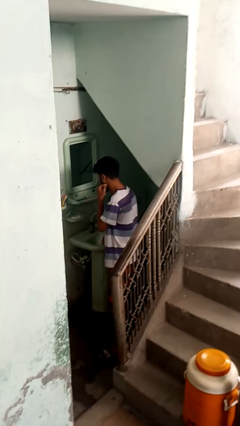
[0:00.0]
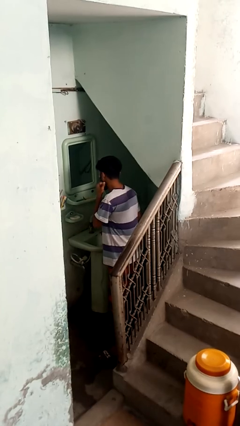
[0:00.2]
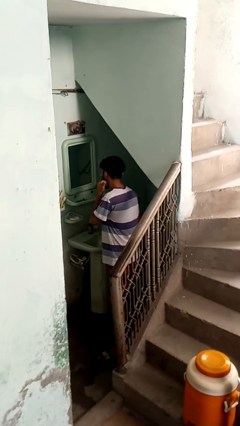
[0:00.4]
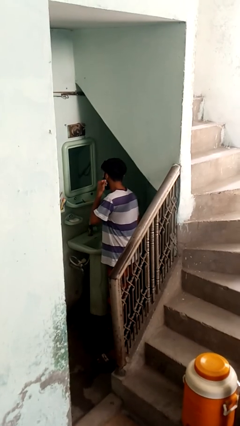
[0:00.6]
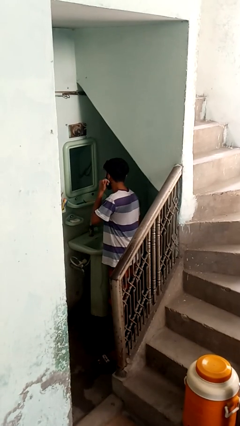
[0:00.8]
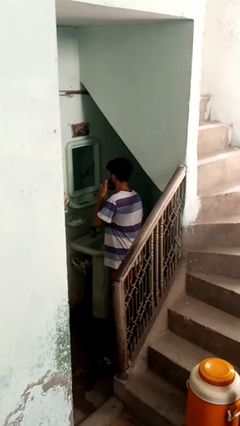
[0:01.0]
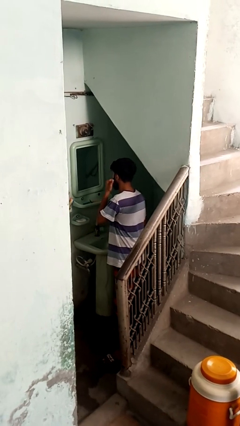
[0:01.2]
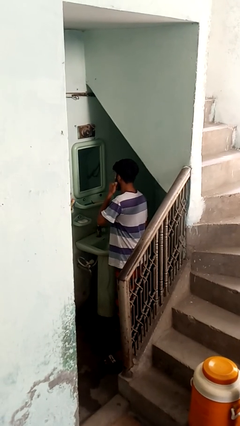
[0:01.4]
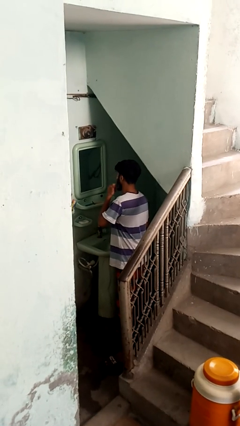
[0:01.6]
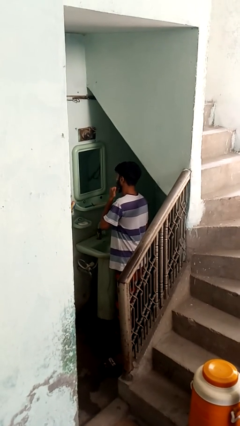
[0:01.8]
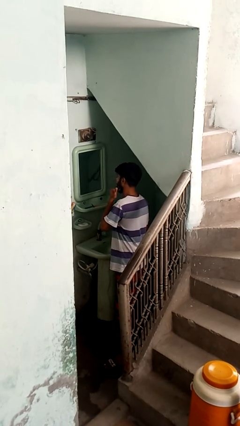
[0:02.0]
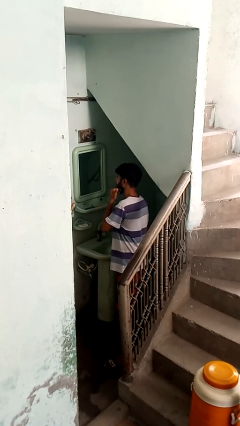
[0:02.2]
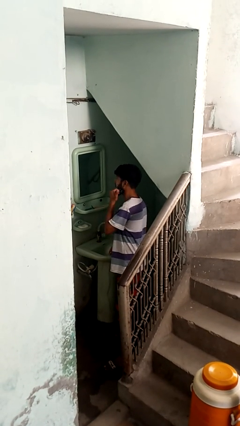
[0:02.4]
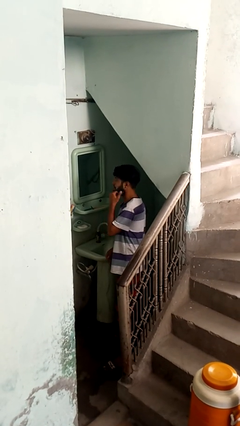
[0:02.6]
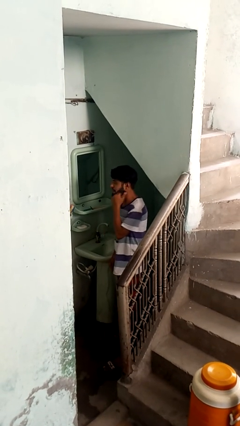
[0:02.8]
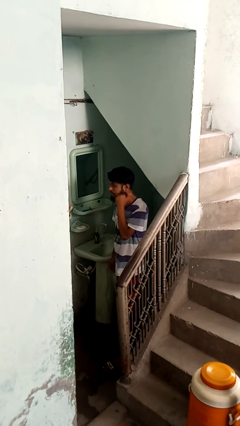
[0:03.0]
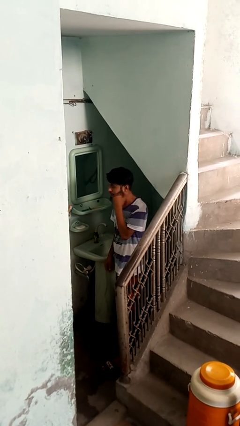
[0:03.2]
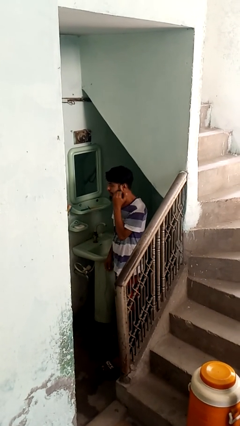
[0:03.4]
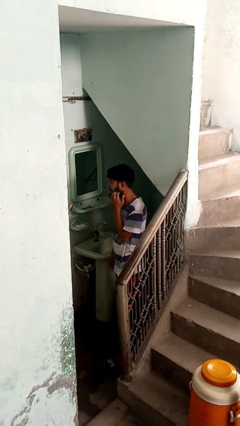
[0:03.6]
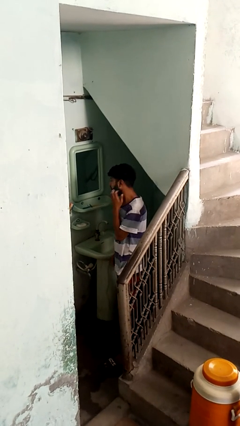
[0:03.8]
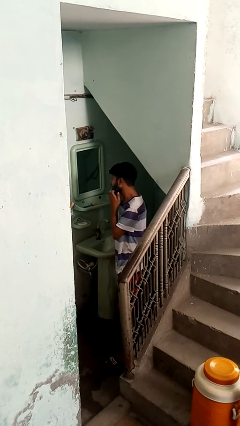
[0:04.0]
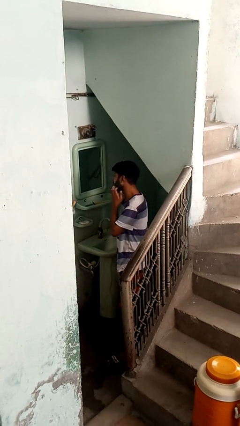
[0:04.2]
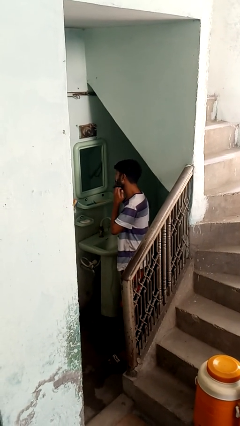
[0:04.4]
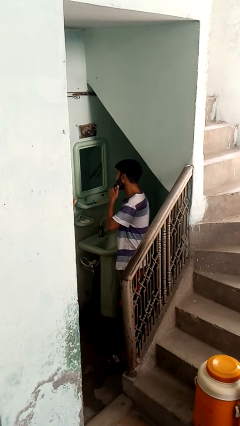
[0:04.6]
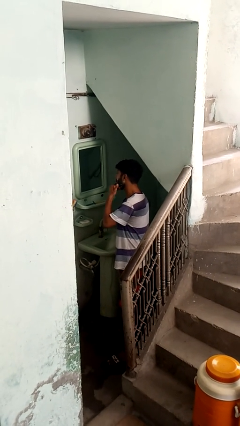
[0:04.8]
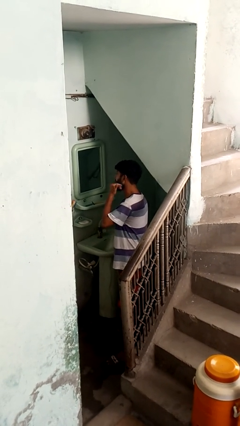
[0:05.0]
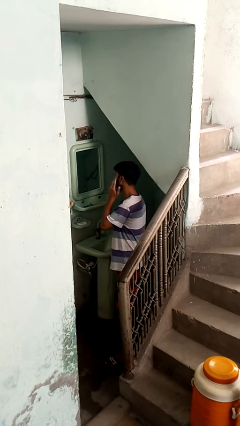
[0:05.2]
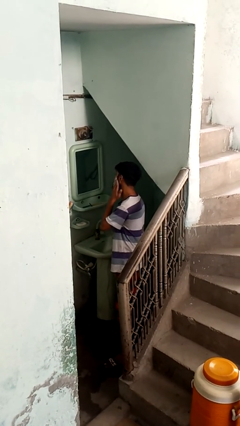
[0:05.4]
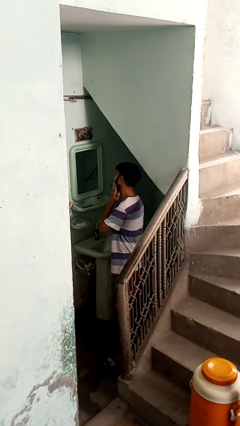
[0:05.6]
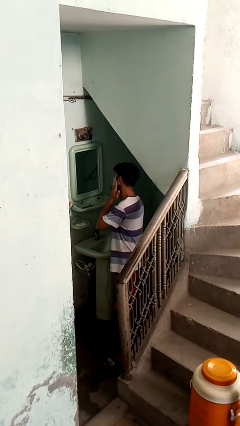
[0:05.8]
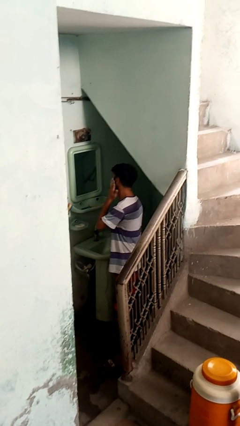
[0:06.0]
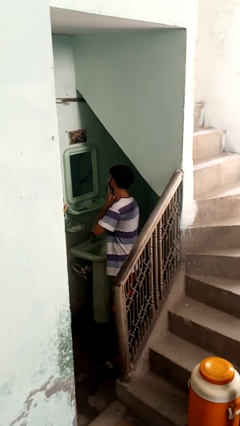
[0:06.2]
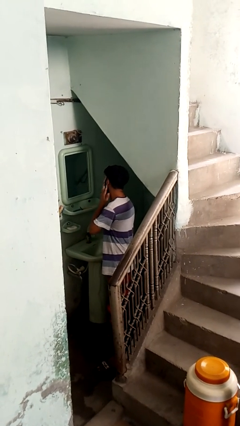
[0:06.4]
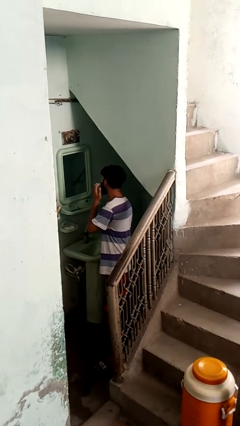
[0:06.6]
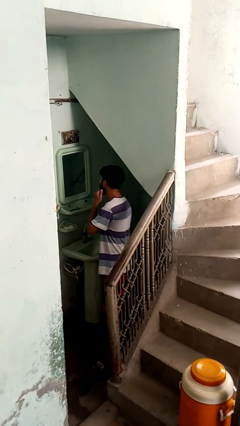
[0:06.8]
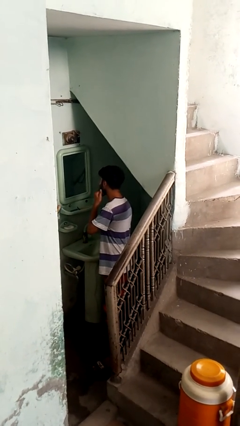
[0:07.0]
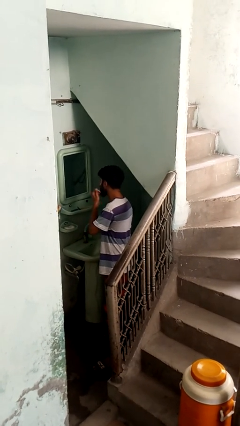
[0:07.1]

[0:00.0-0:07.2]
person applies shaving cream

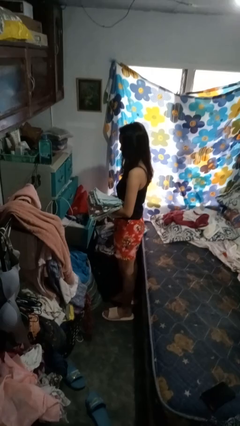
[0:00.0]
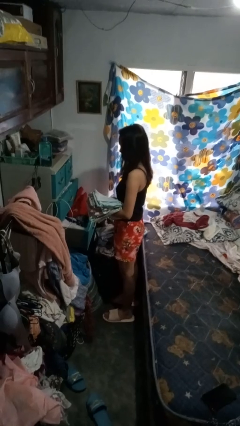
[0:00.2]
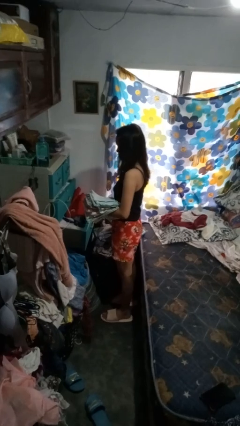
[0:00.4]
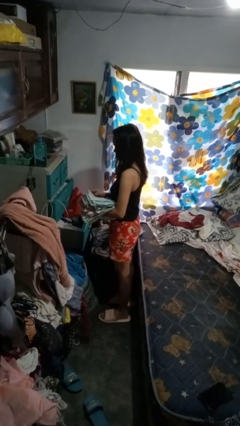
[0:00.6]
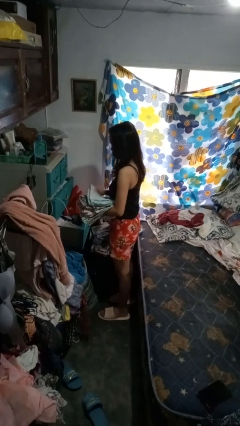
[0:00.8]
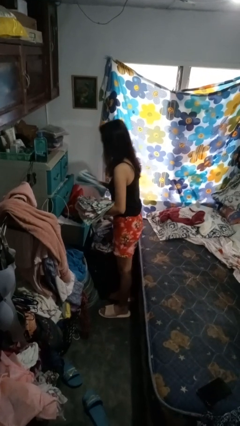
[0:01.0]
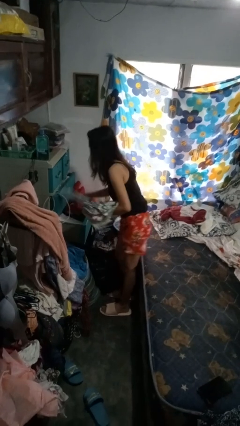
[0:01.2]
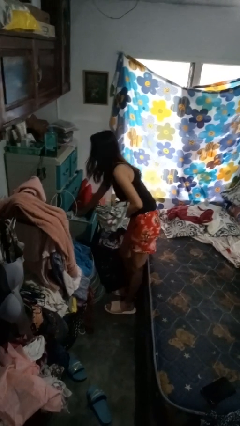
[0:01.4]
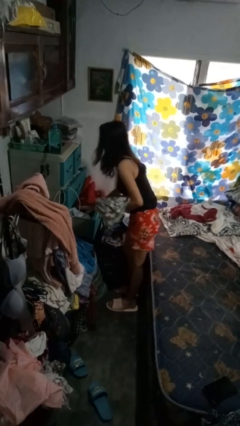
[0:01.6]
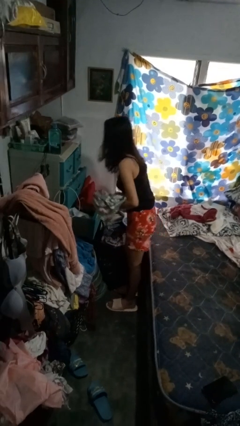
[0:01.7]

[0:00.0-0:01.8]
person puts clothes into dresser

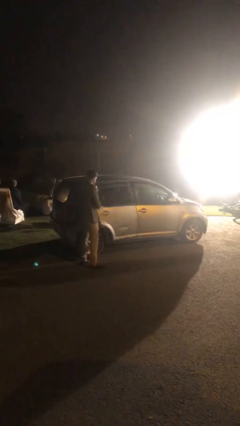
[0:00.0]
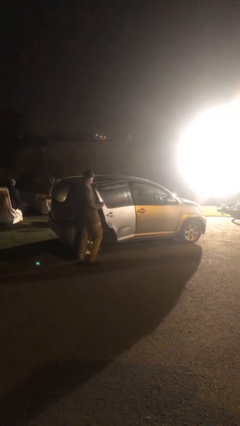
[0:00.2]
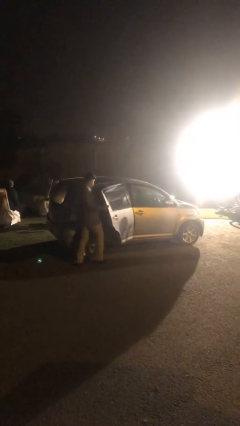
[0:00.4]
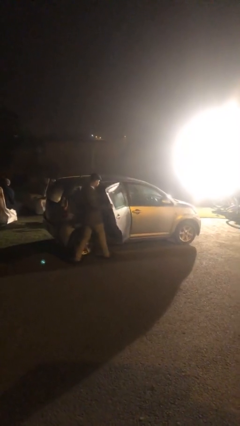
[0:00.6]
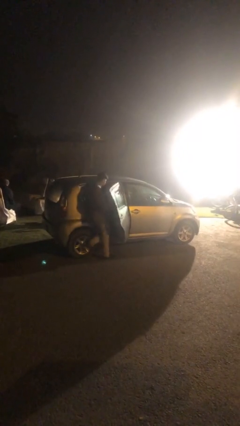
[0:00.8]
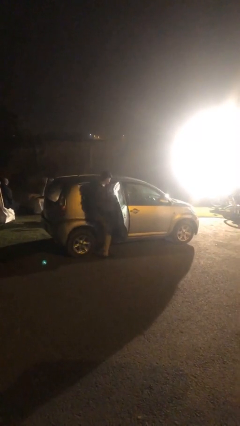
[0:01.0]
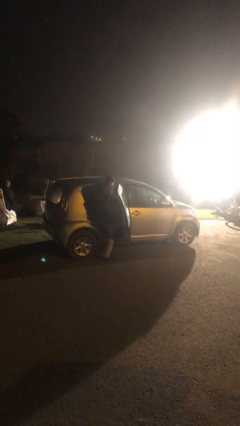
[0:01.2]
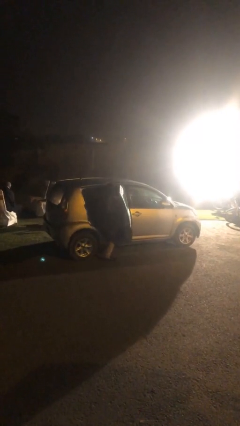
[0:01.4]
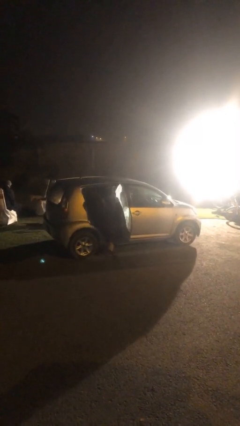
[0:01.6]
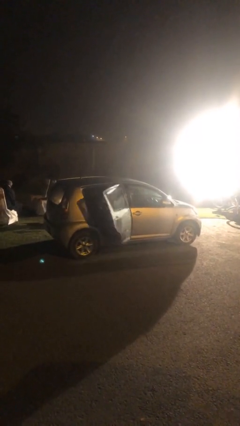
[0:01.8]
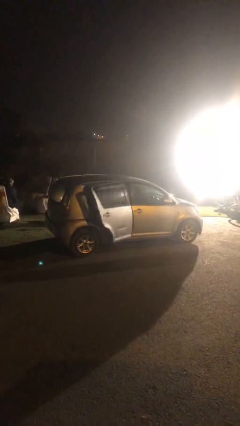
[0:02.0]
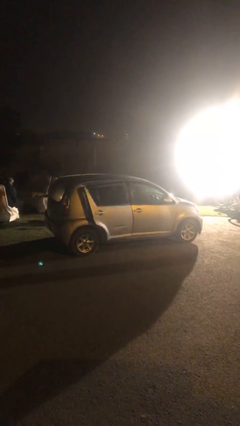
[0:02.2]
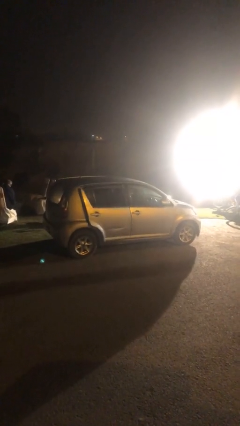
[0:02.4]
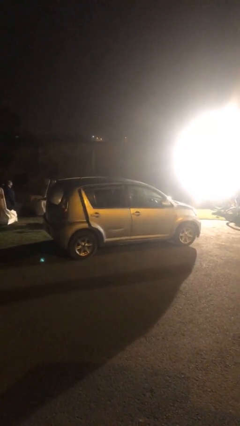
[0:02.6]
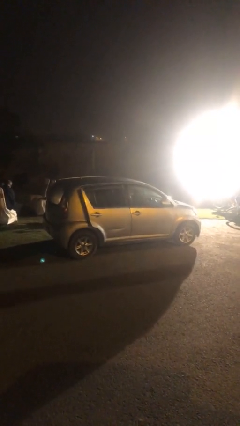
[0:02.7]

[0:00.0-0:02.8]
car picks up person

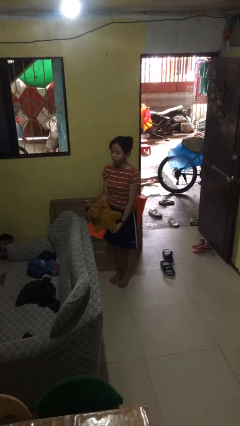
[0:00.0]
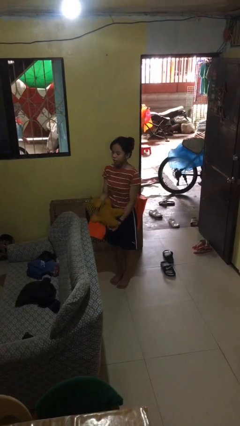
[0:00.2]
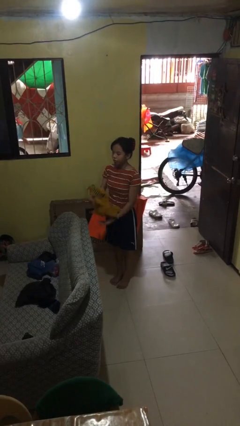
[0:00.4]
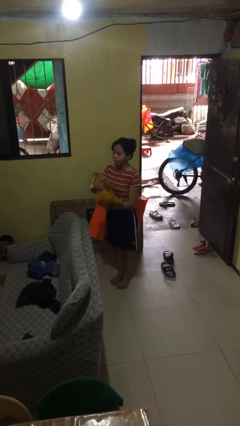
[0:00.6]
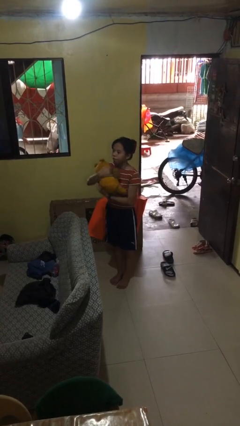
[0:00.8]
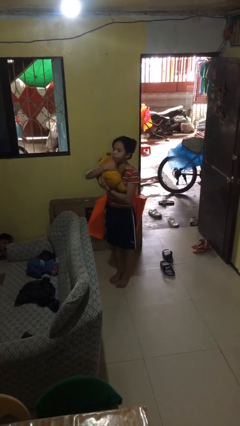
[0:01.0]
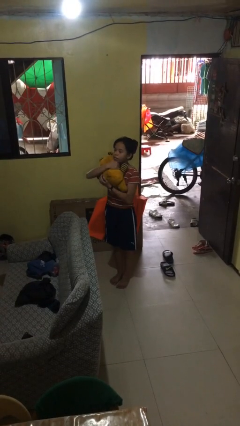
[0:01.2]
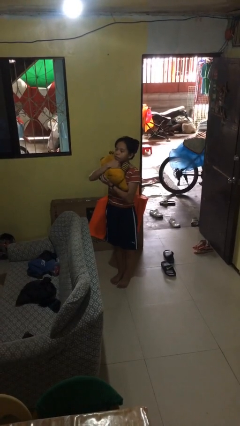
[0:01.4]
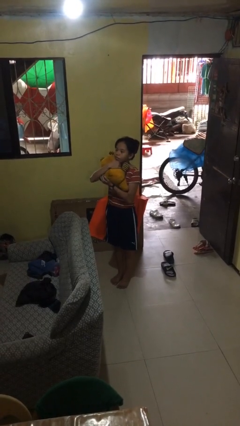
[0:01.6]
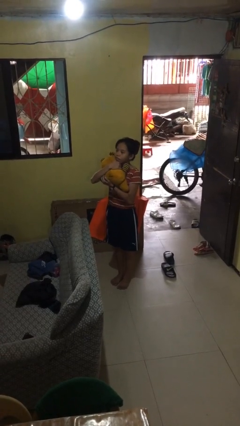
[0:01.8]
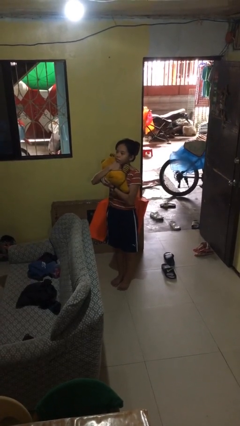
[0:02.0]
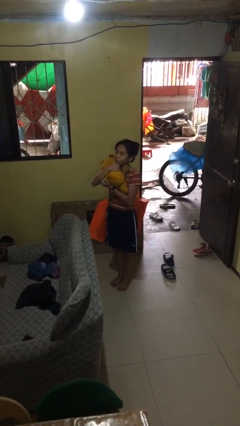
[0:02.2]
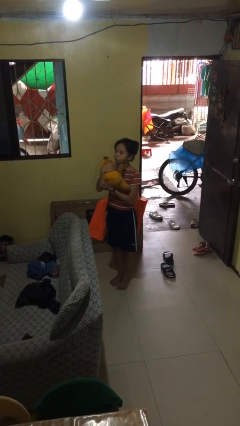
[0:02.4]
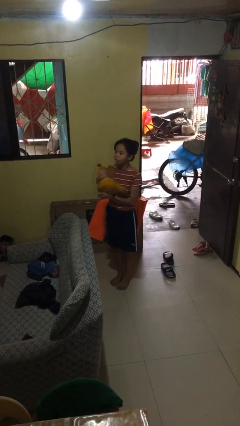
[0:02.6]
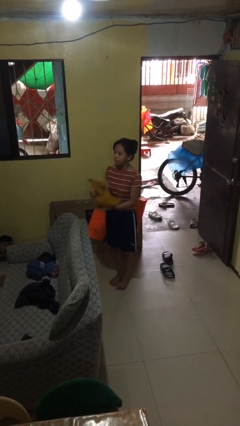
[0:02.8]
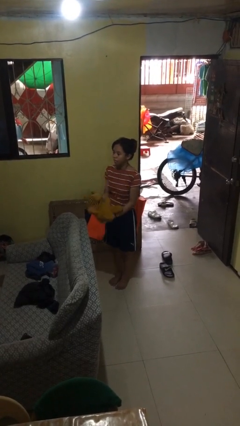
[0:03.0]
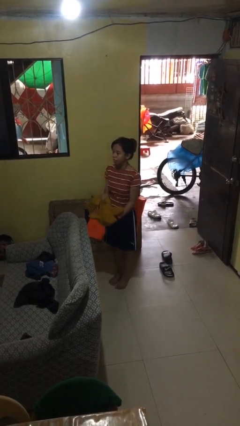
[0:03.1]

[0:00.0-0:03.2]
person hugs stuffed animal

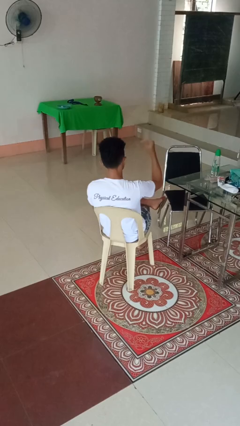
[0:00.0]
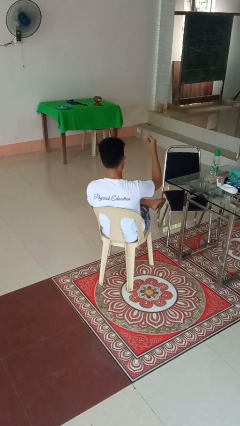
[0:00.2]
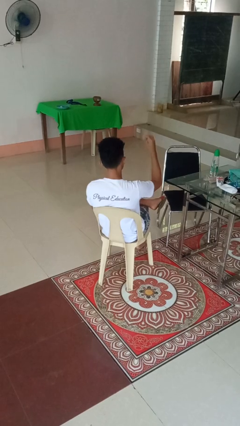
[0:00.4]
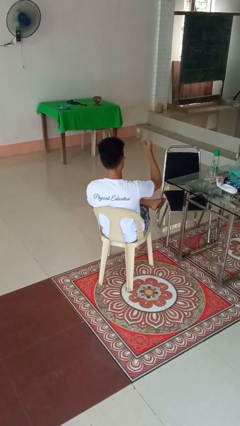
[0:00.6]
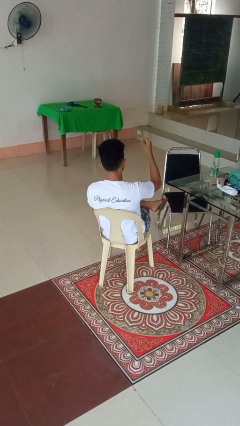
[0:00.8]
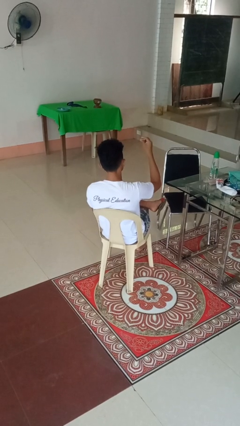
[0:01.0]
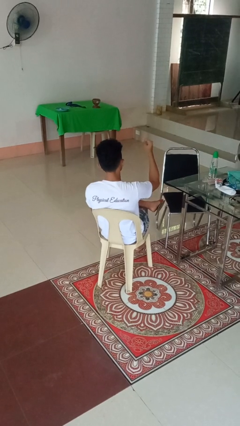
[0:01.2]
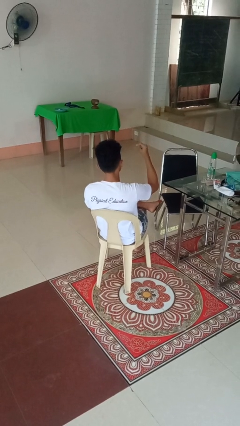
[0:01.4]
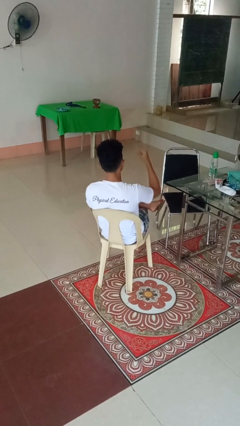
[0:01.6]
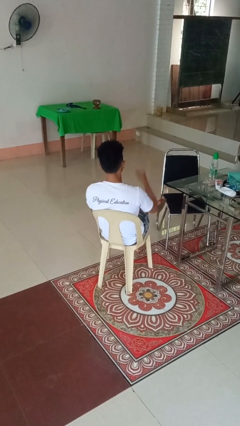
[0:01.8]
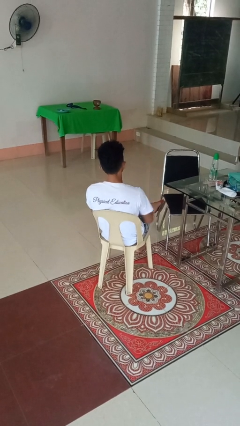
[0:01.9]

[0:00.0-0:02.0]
person snaps fingers

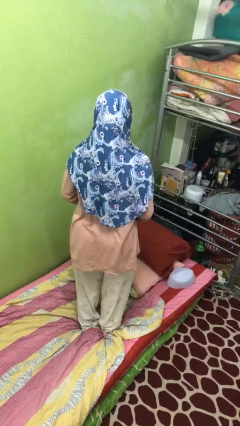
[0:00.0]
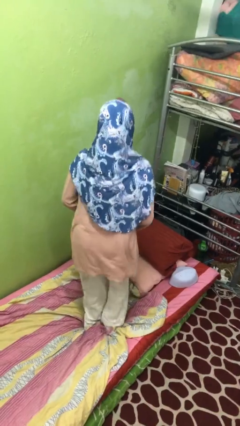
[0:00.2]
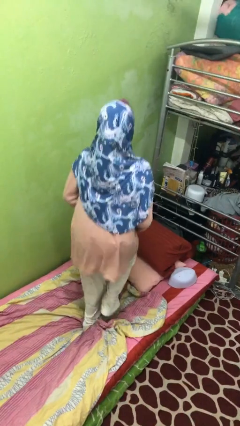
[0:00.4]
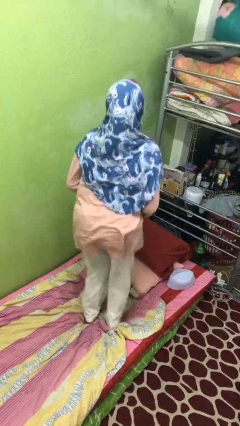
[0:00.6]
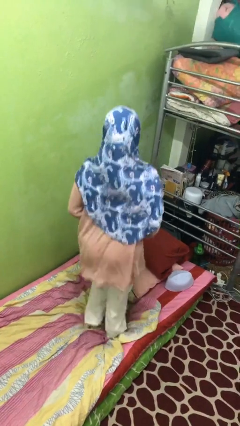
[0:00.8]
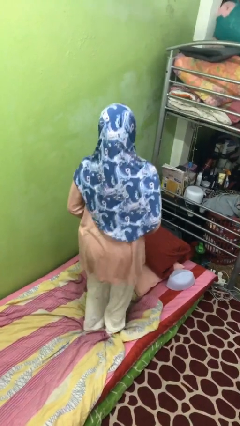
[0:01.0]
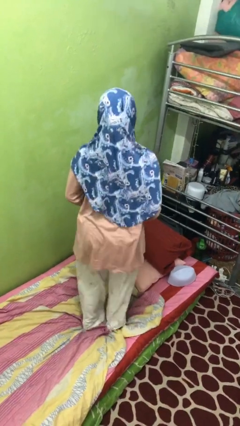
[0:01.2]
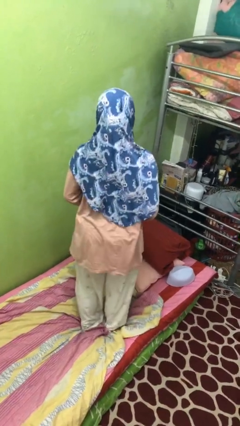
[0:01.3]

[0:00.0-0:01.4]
person jumps on bed
